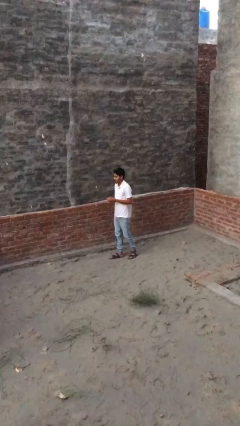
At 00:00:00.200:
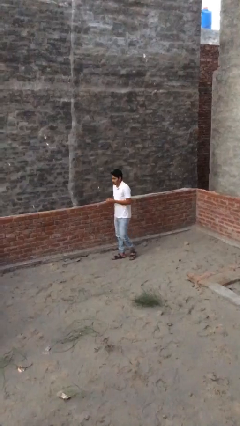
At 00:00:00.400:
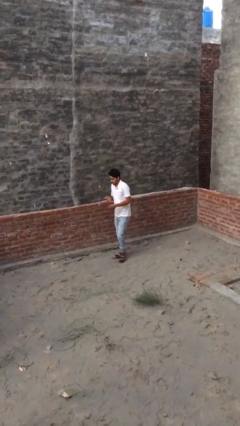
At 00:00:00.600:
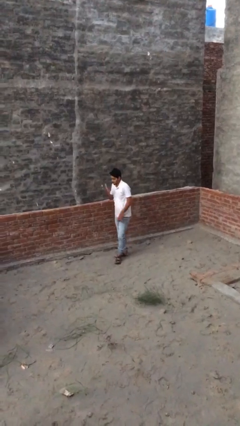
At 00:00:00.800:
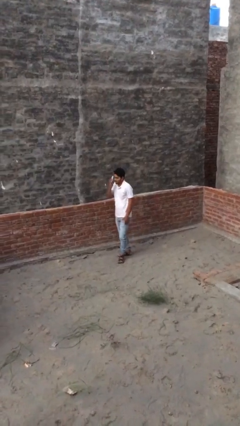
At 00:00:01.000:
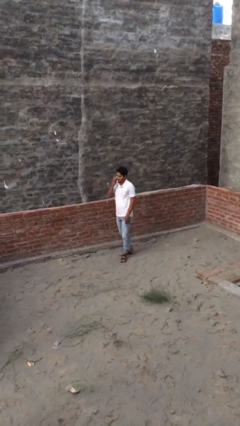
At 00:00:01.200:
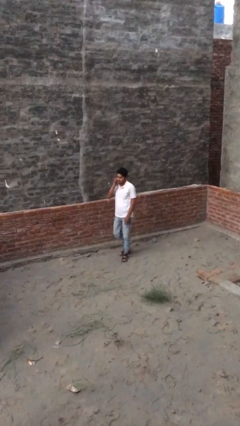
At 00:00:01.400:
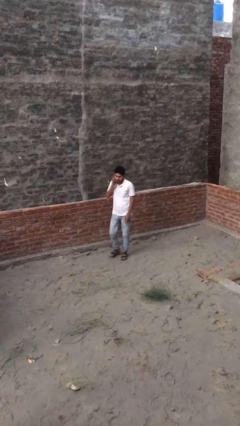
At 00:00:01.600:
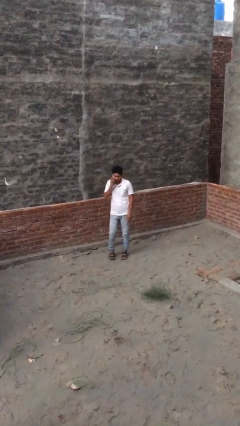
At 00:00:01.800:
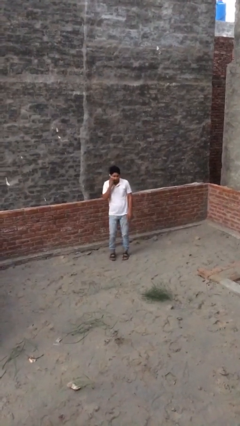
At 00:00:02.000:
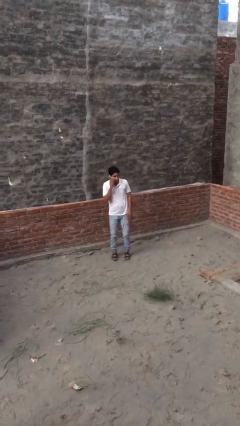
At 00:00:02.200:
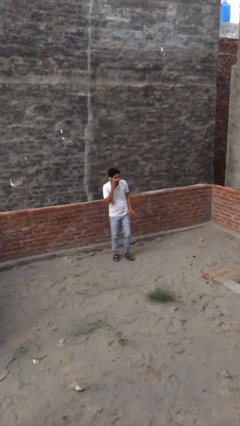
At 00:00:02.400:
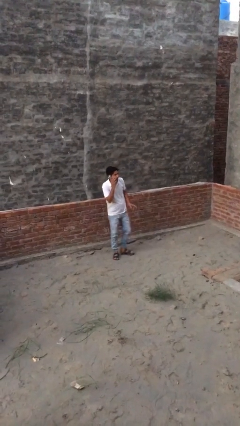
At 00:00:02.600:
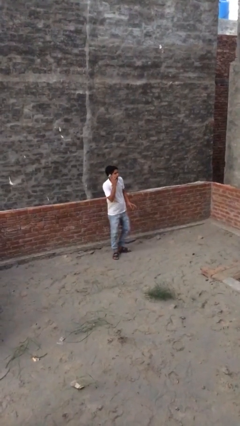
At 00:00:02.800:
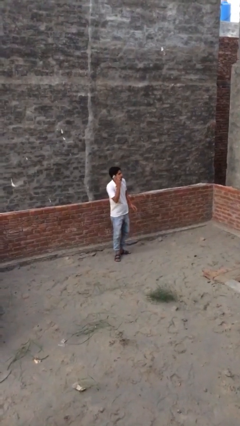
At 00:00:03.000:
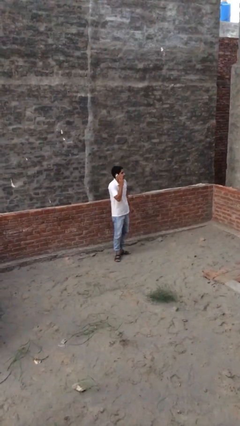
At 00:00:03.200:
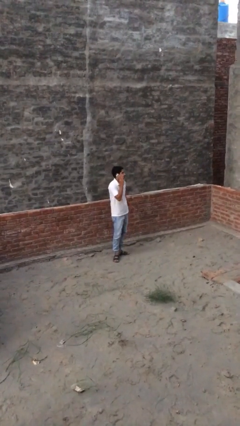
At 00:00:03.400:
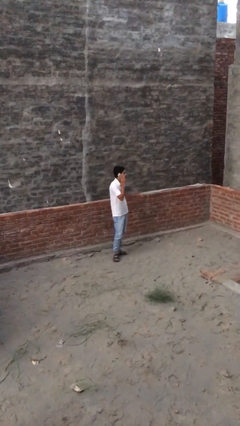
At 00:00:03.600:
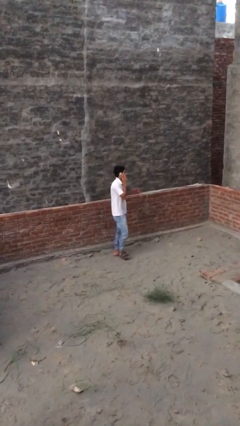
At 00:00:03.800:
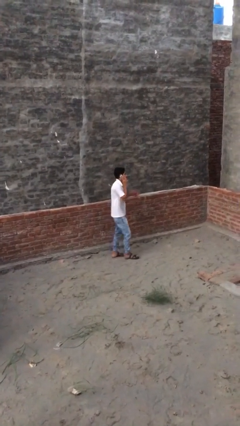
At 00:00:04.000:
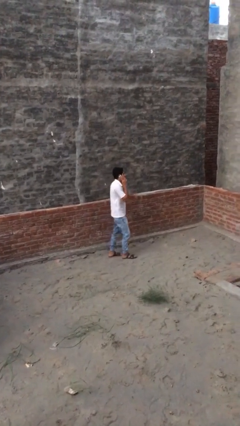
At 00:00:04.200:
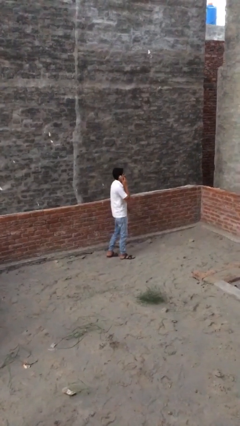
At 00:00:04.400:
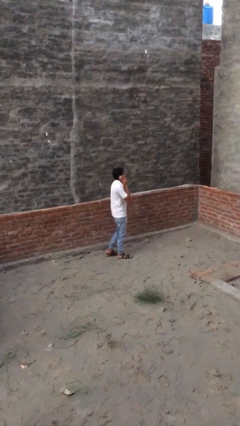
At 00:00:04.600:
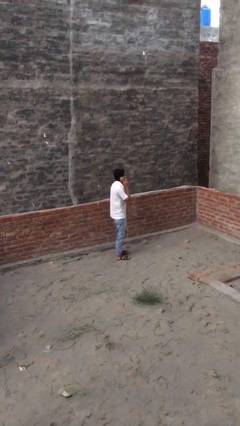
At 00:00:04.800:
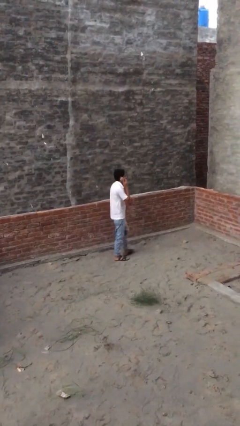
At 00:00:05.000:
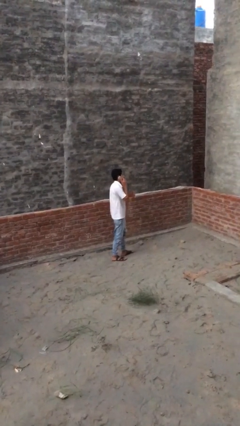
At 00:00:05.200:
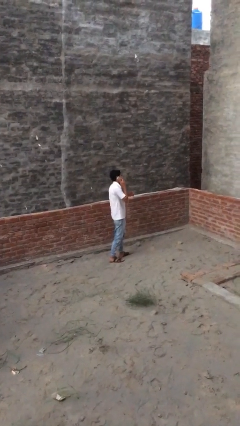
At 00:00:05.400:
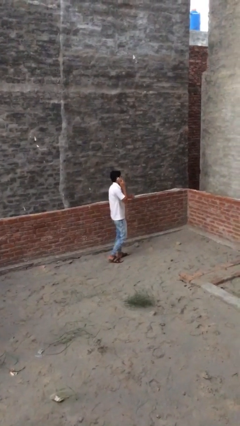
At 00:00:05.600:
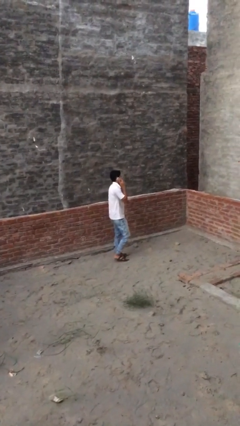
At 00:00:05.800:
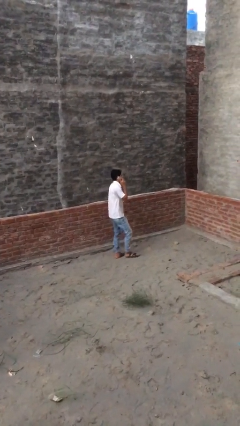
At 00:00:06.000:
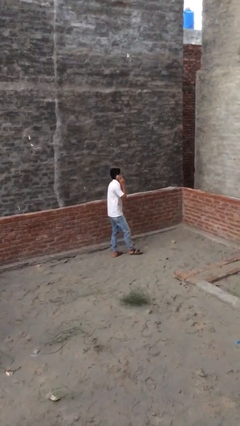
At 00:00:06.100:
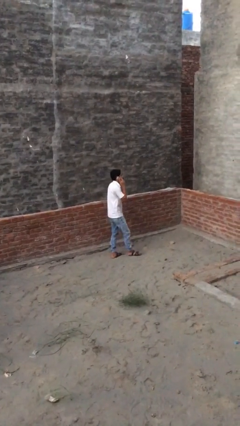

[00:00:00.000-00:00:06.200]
person talks on phone

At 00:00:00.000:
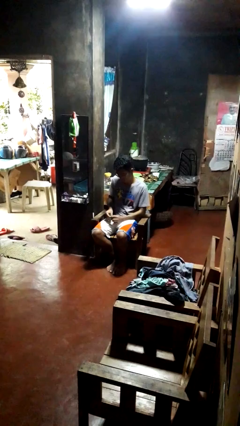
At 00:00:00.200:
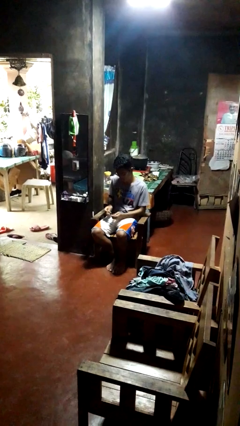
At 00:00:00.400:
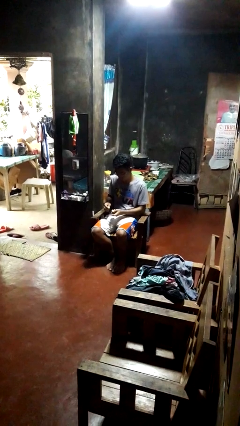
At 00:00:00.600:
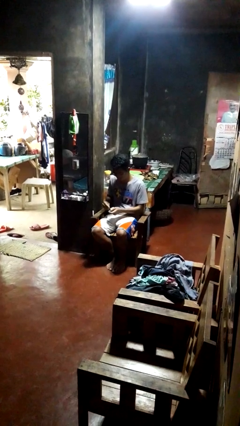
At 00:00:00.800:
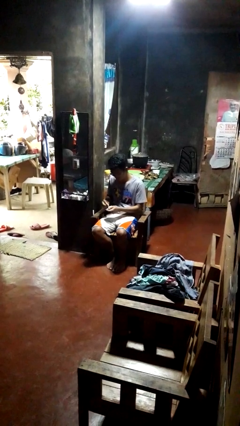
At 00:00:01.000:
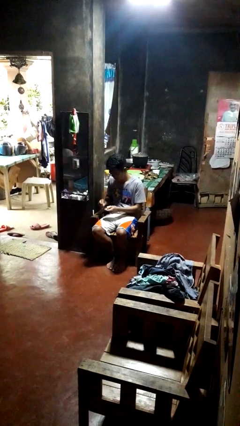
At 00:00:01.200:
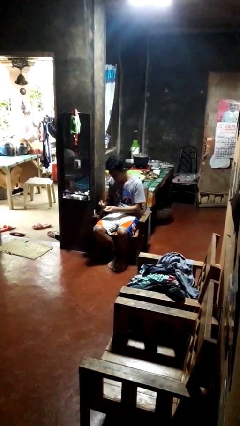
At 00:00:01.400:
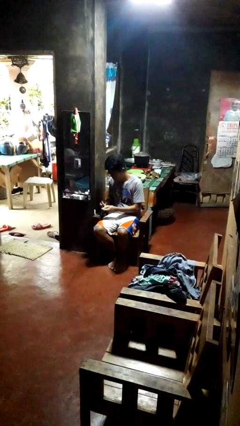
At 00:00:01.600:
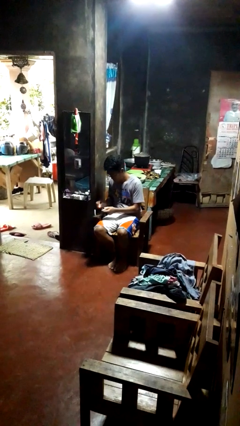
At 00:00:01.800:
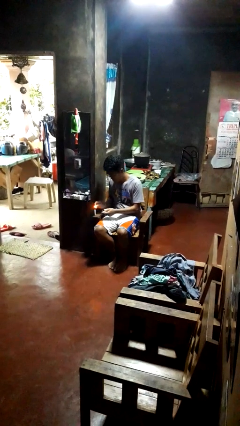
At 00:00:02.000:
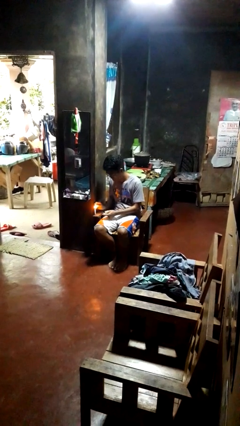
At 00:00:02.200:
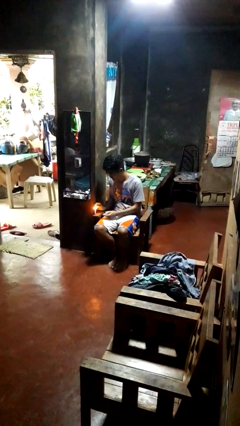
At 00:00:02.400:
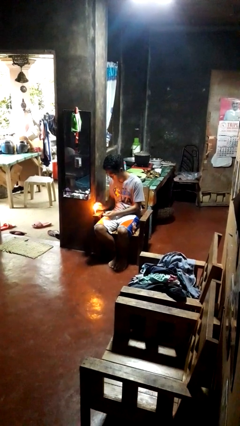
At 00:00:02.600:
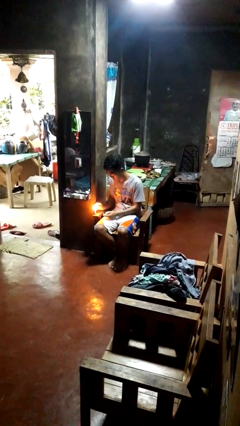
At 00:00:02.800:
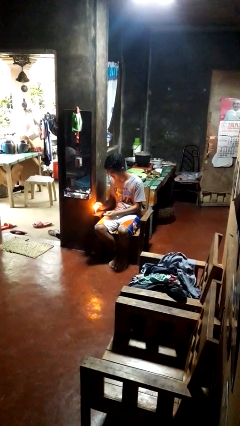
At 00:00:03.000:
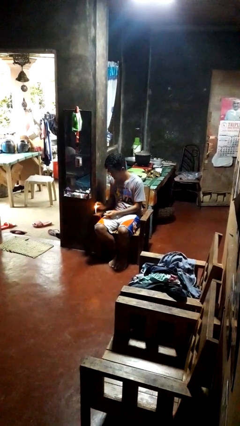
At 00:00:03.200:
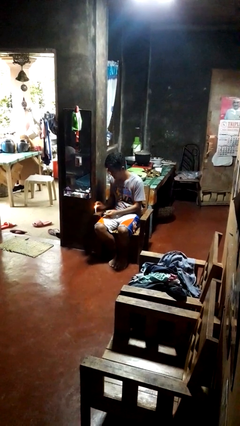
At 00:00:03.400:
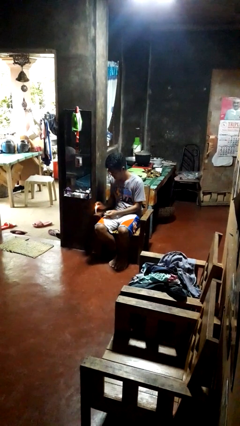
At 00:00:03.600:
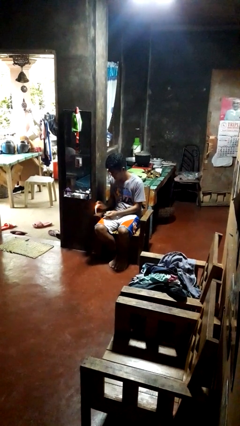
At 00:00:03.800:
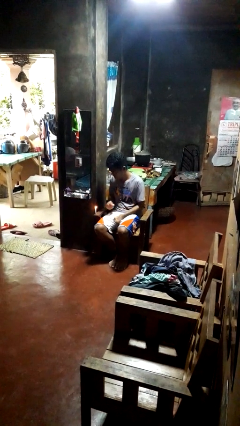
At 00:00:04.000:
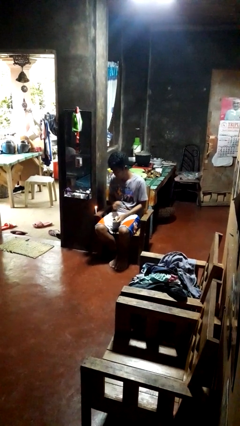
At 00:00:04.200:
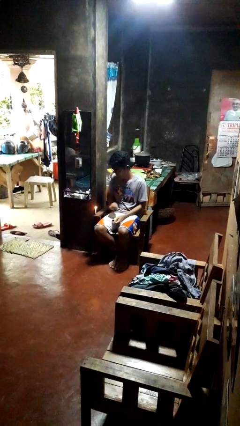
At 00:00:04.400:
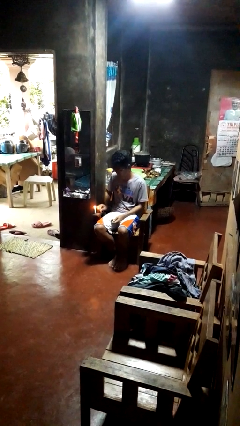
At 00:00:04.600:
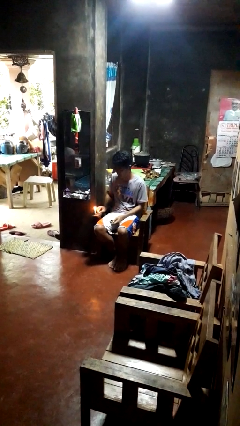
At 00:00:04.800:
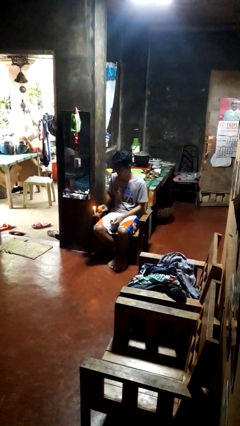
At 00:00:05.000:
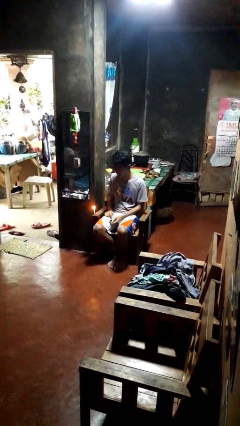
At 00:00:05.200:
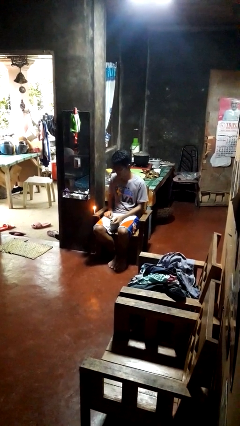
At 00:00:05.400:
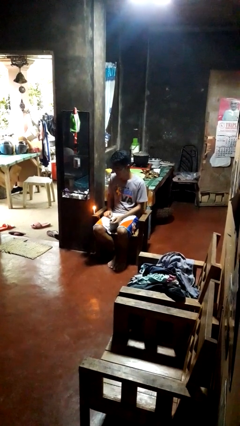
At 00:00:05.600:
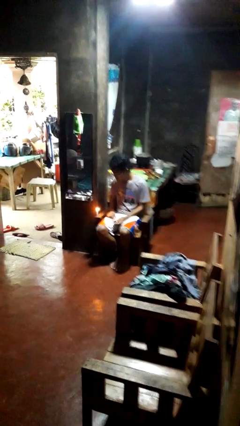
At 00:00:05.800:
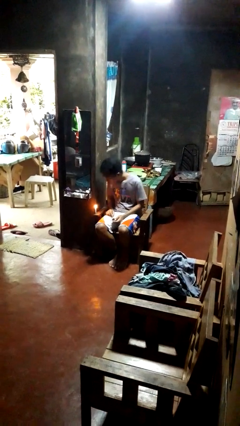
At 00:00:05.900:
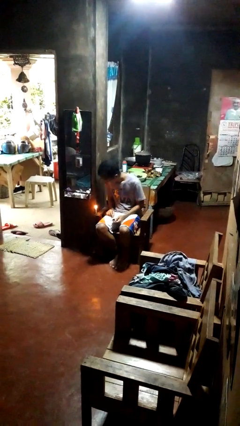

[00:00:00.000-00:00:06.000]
person lights candle

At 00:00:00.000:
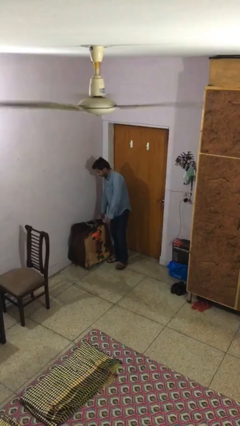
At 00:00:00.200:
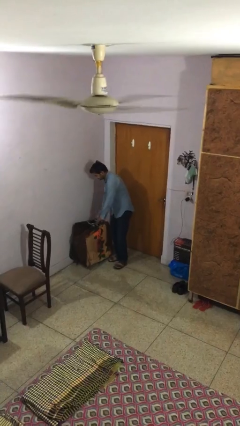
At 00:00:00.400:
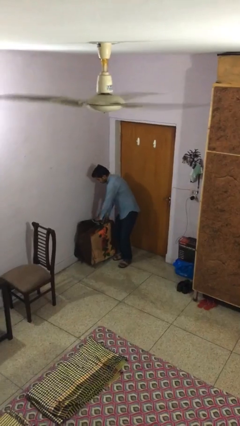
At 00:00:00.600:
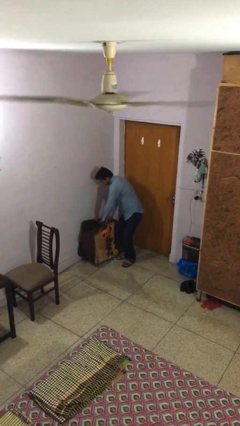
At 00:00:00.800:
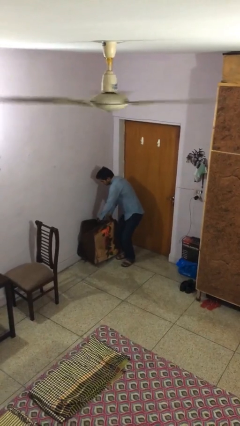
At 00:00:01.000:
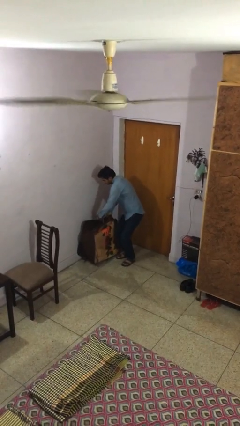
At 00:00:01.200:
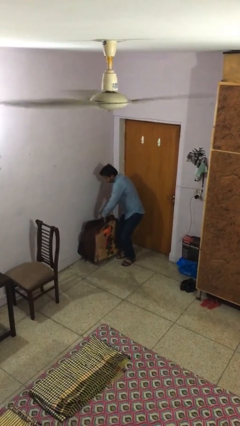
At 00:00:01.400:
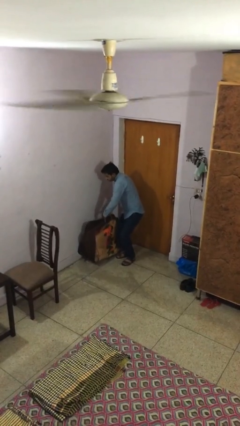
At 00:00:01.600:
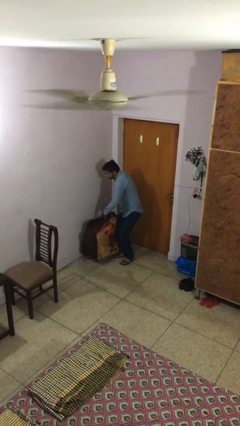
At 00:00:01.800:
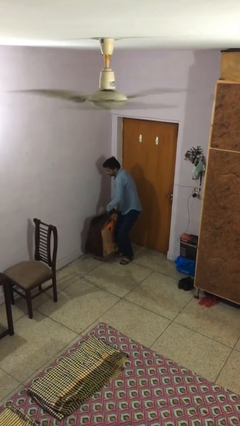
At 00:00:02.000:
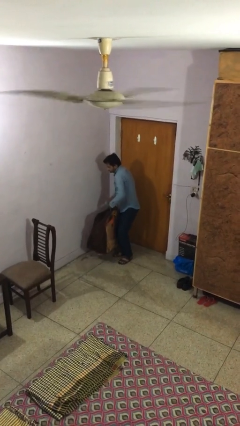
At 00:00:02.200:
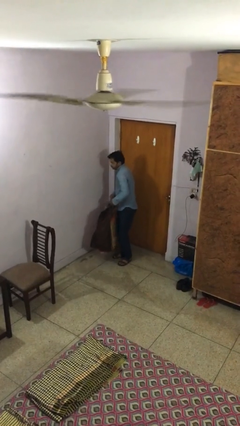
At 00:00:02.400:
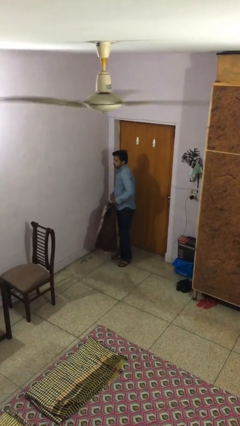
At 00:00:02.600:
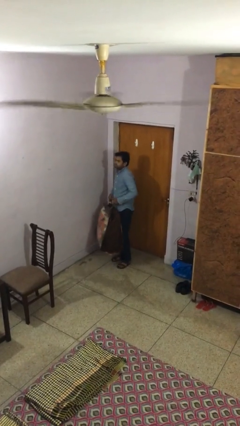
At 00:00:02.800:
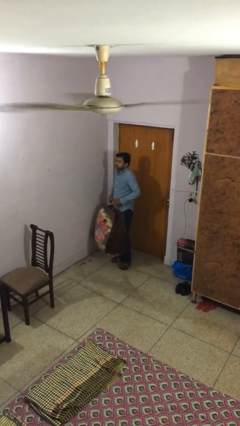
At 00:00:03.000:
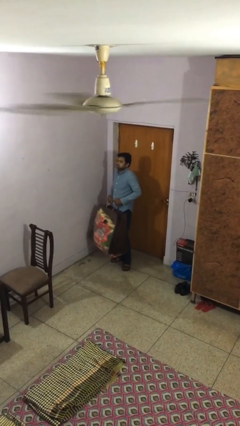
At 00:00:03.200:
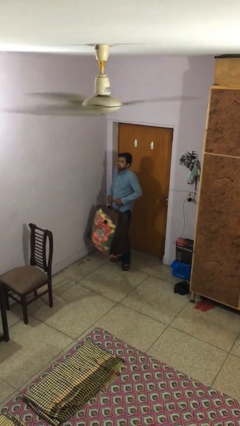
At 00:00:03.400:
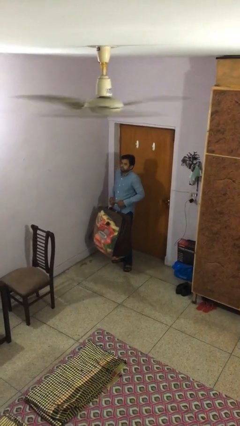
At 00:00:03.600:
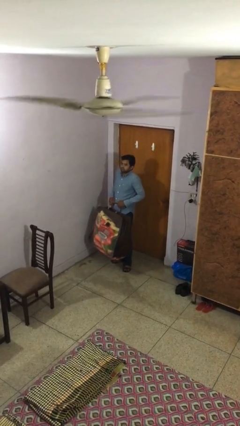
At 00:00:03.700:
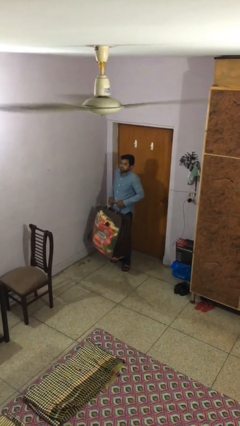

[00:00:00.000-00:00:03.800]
person picks up object from floor

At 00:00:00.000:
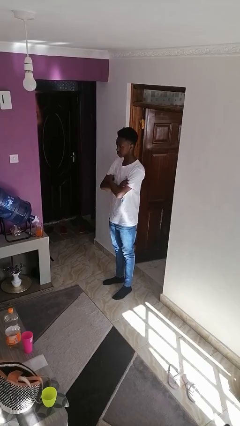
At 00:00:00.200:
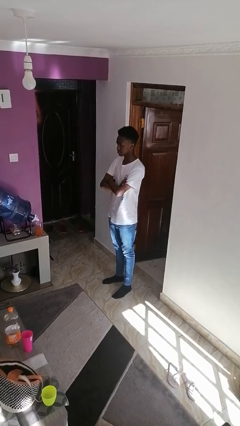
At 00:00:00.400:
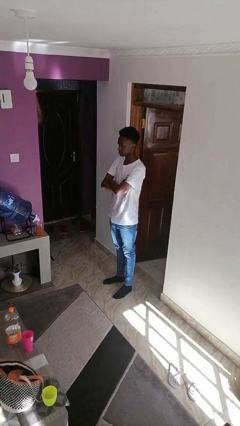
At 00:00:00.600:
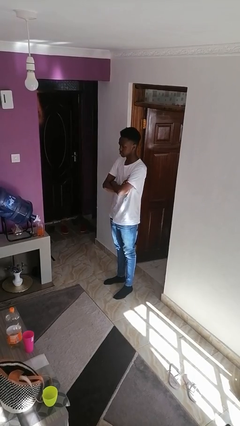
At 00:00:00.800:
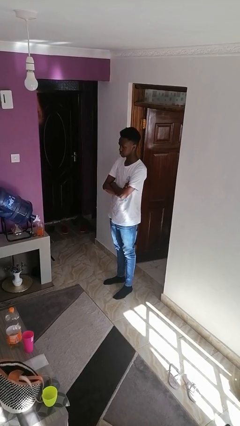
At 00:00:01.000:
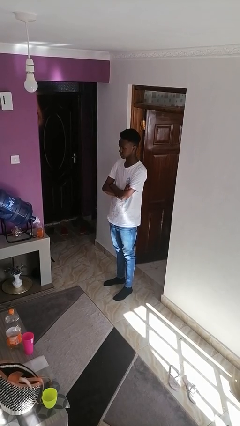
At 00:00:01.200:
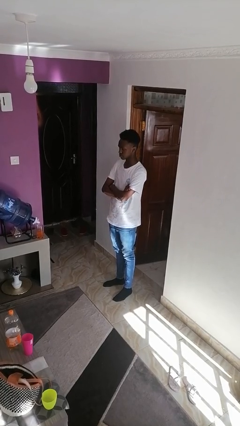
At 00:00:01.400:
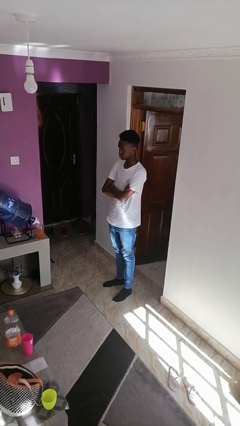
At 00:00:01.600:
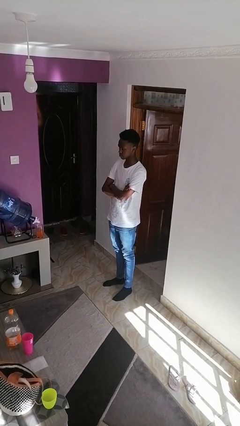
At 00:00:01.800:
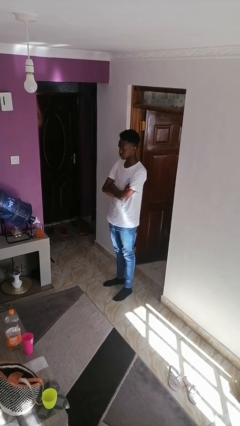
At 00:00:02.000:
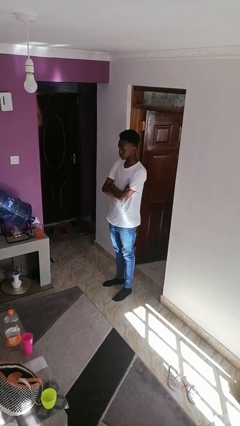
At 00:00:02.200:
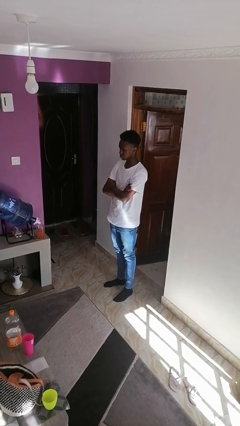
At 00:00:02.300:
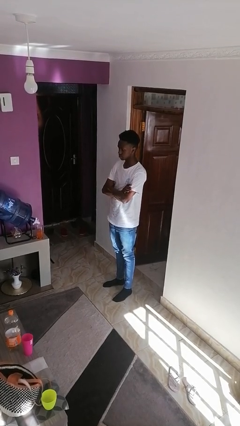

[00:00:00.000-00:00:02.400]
person crosses arms
